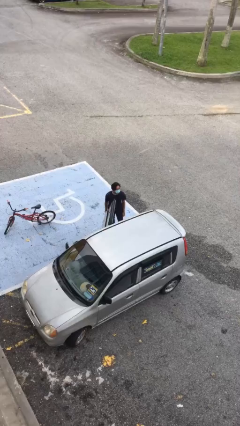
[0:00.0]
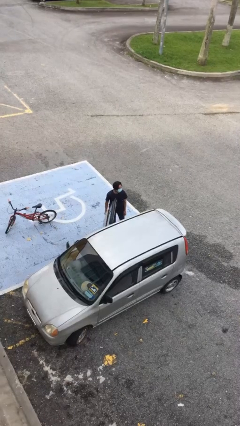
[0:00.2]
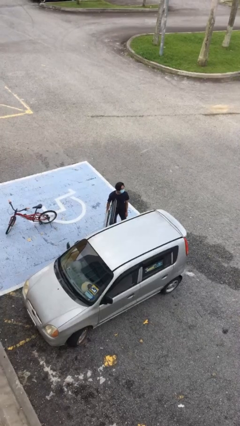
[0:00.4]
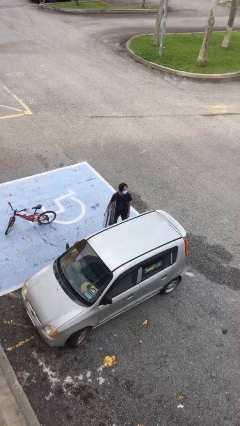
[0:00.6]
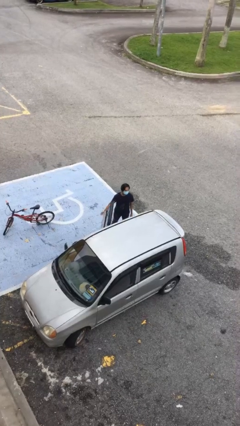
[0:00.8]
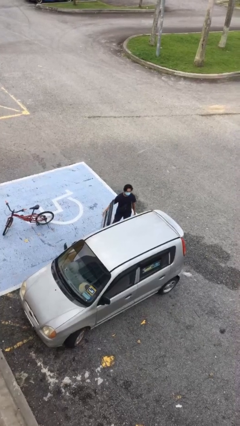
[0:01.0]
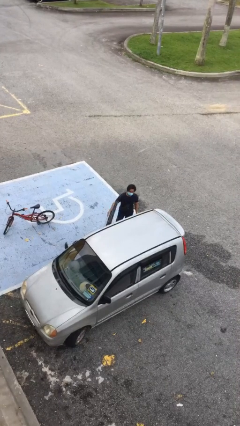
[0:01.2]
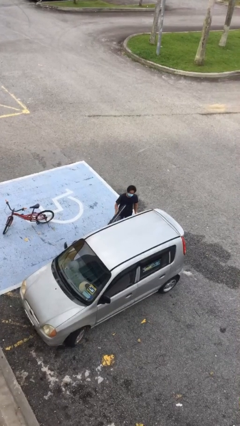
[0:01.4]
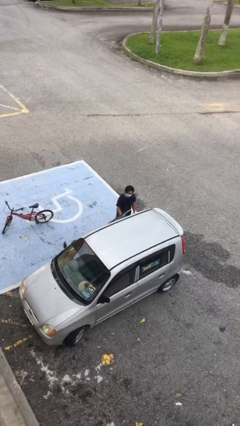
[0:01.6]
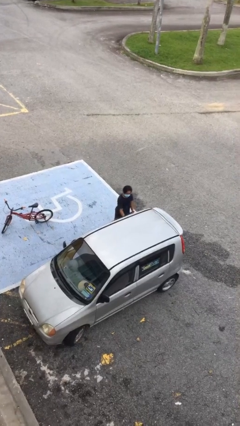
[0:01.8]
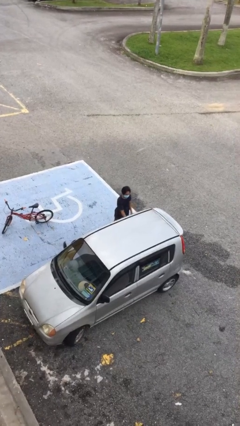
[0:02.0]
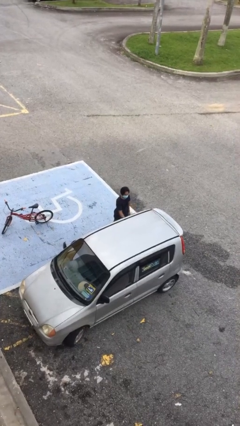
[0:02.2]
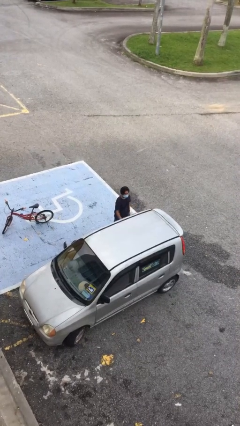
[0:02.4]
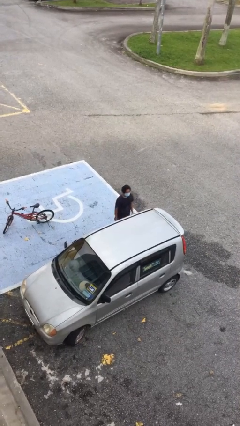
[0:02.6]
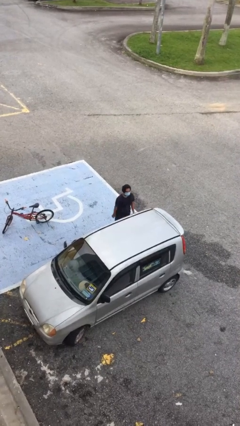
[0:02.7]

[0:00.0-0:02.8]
person closes car door

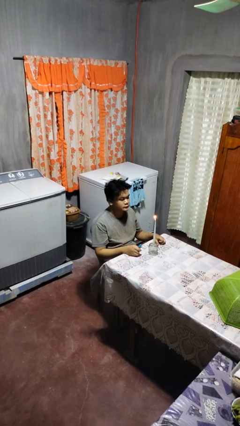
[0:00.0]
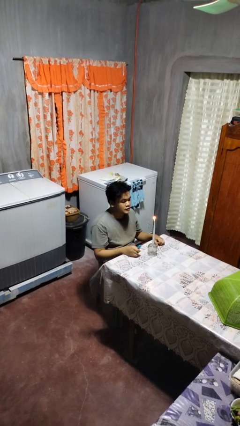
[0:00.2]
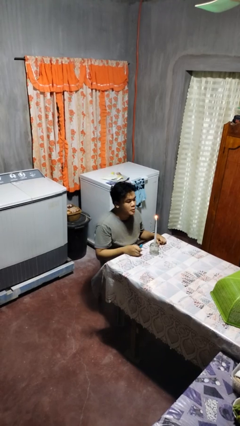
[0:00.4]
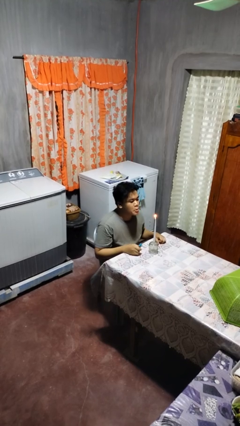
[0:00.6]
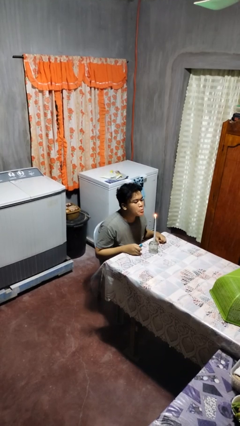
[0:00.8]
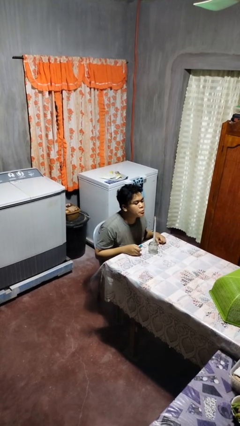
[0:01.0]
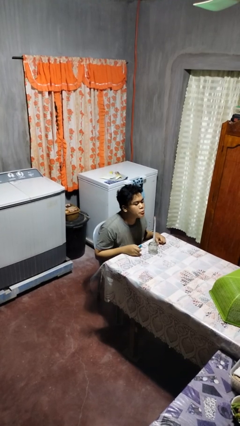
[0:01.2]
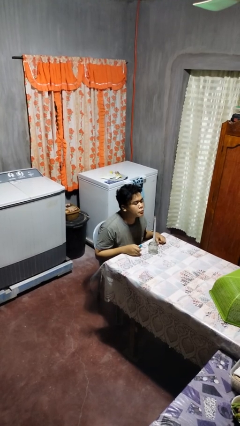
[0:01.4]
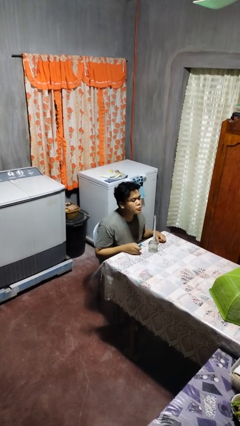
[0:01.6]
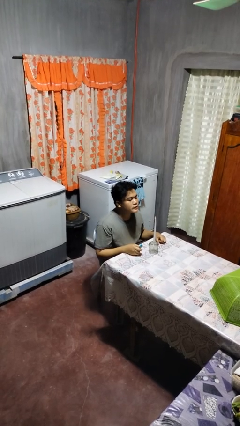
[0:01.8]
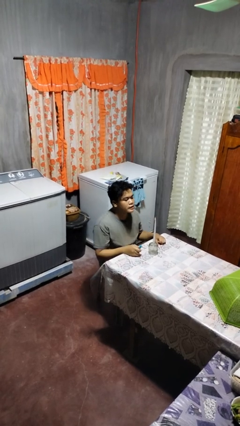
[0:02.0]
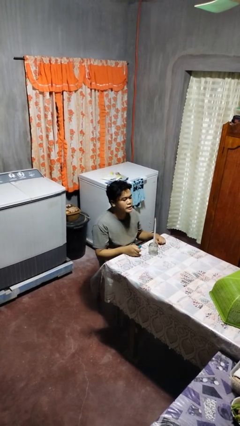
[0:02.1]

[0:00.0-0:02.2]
person extinguishes candle

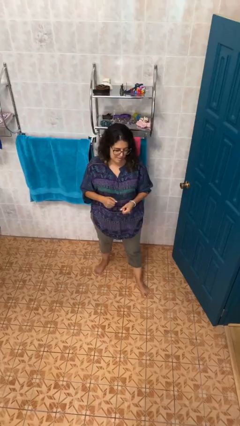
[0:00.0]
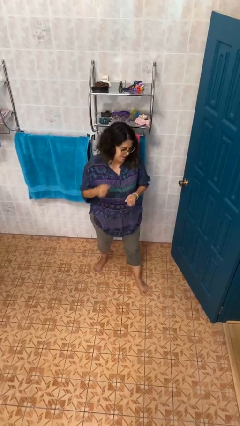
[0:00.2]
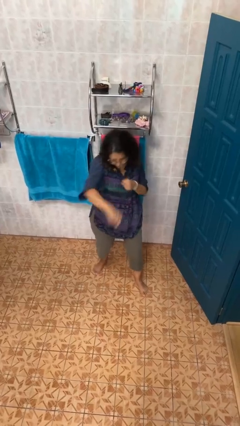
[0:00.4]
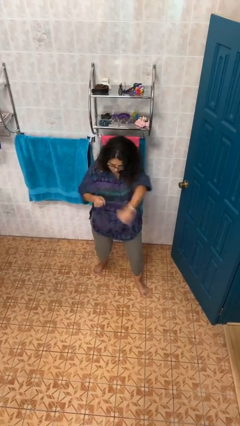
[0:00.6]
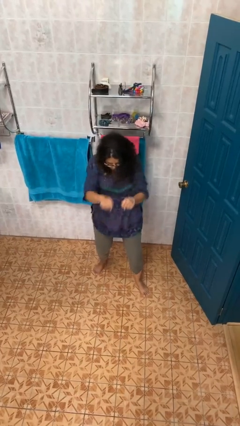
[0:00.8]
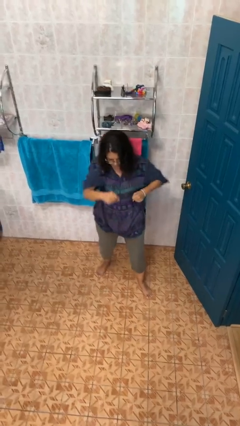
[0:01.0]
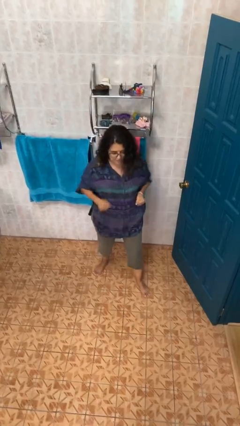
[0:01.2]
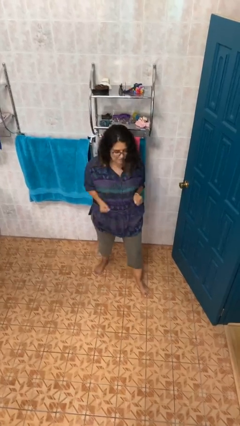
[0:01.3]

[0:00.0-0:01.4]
person punches

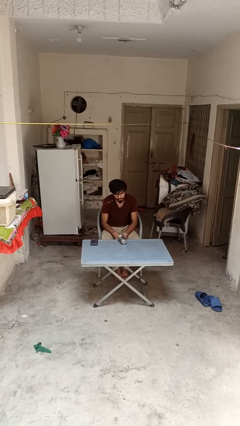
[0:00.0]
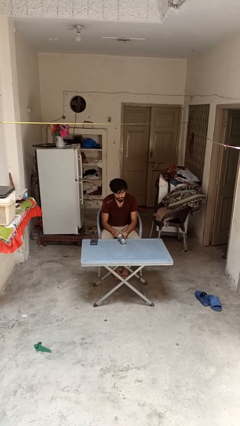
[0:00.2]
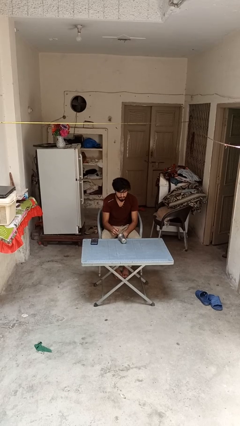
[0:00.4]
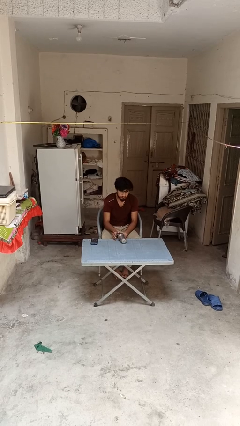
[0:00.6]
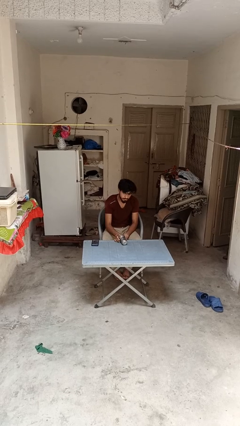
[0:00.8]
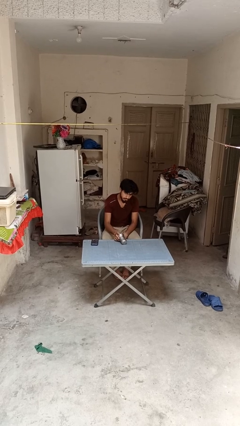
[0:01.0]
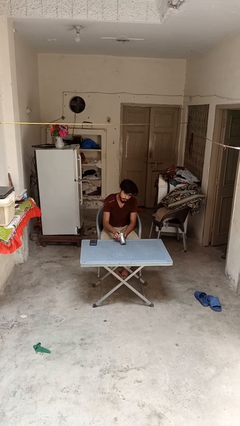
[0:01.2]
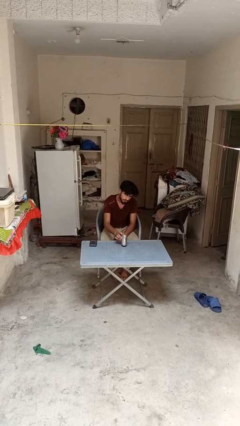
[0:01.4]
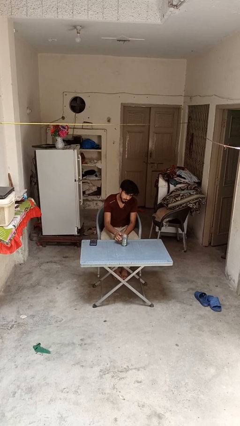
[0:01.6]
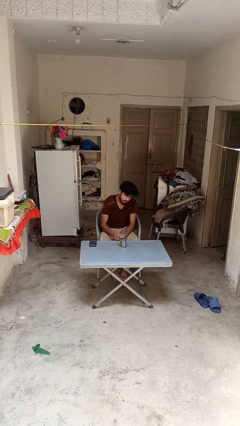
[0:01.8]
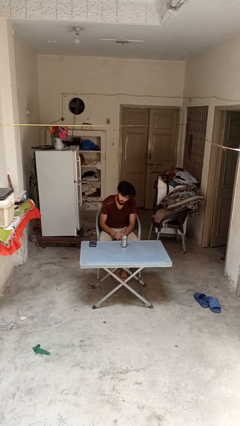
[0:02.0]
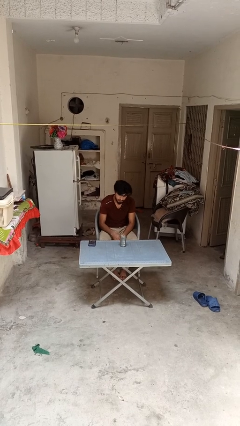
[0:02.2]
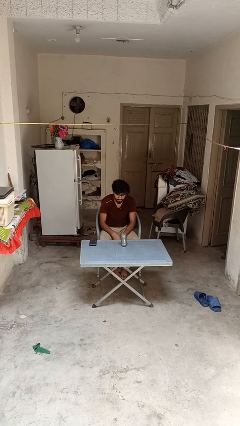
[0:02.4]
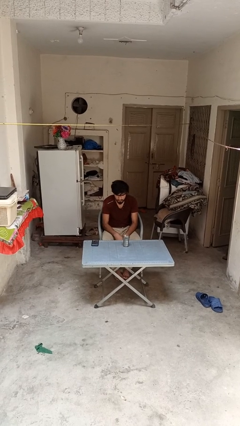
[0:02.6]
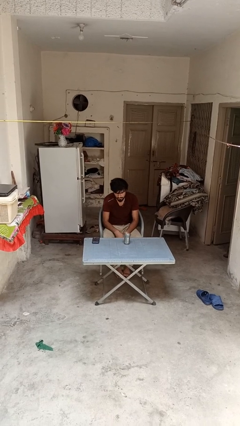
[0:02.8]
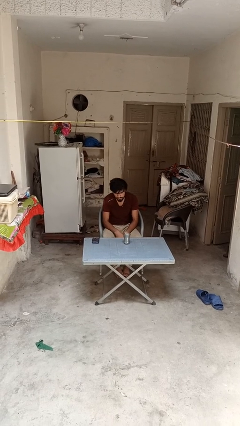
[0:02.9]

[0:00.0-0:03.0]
person sets upright glass

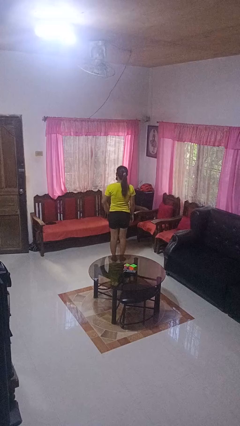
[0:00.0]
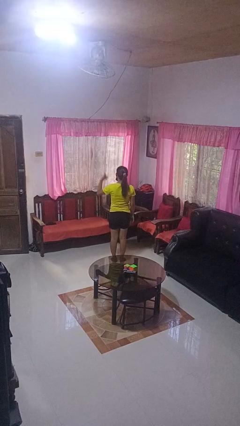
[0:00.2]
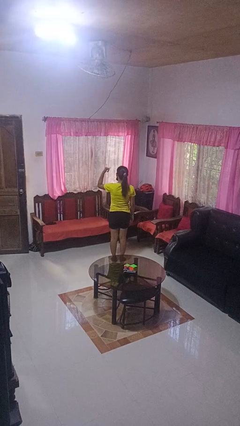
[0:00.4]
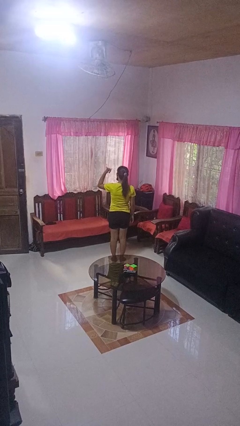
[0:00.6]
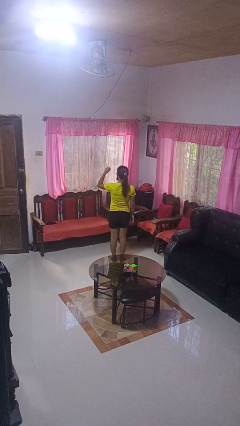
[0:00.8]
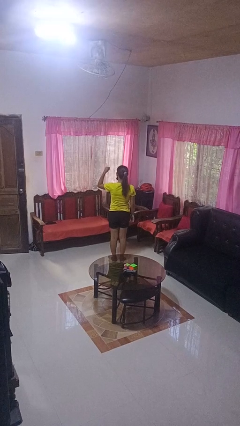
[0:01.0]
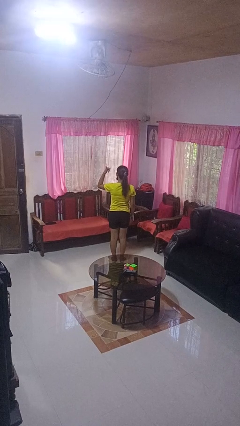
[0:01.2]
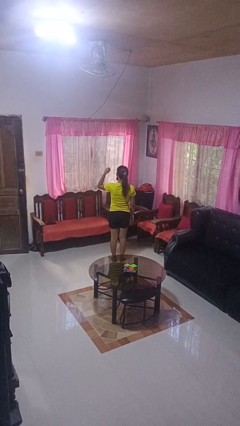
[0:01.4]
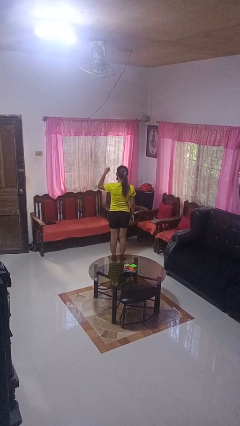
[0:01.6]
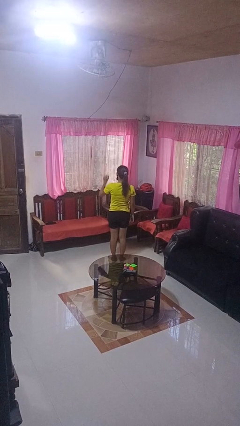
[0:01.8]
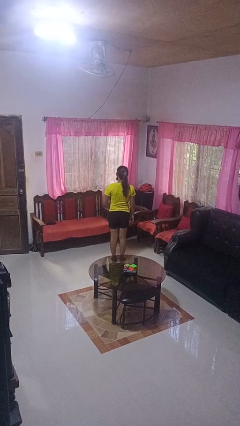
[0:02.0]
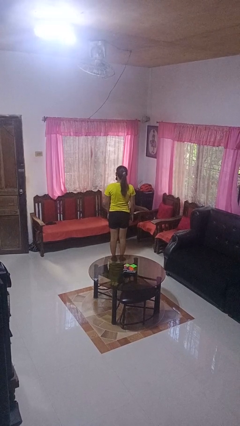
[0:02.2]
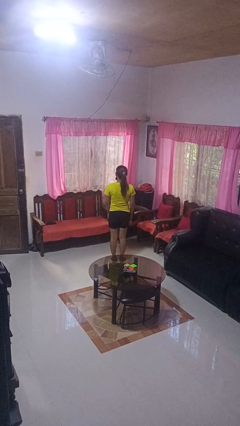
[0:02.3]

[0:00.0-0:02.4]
person gestures hang loose

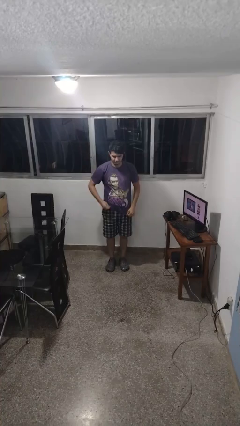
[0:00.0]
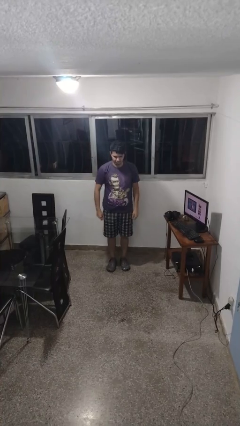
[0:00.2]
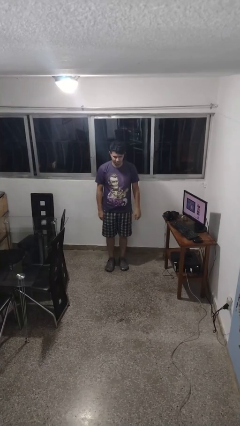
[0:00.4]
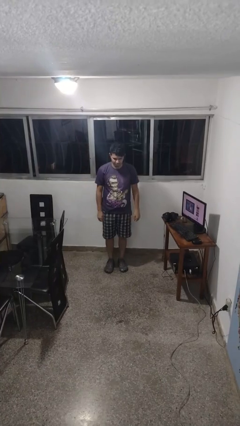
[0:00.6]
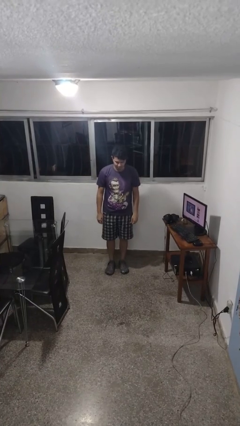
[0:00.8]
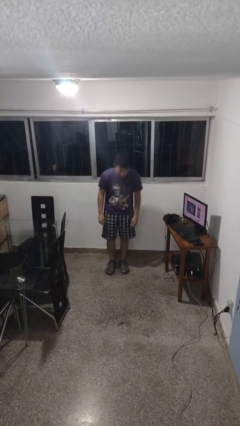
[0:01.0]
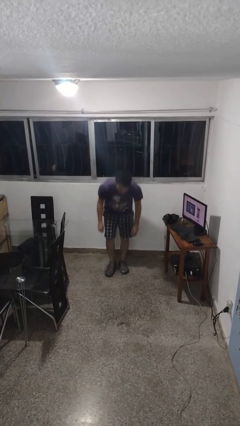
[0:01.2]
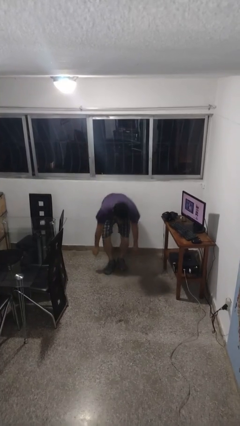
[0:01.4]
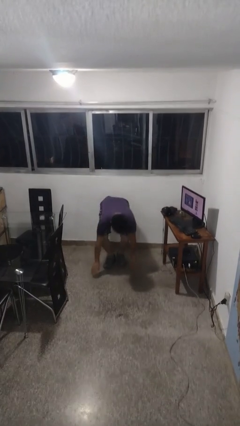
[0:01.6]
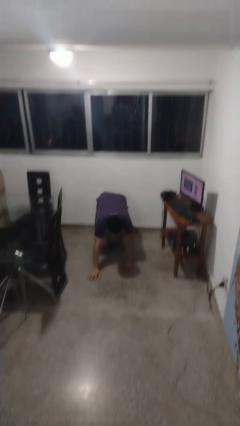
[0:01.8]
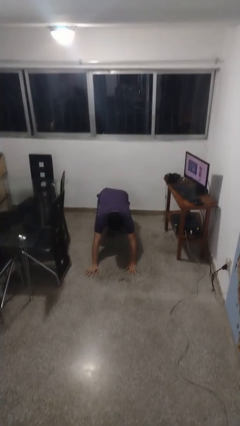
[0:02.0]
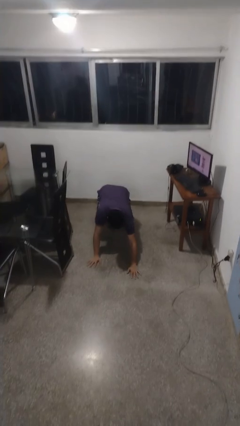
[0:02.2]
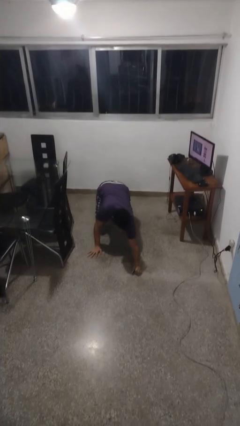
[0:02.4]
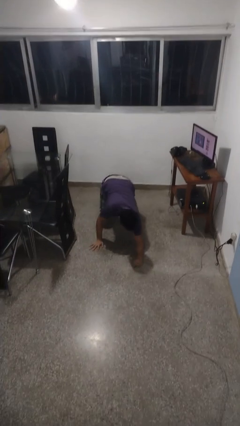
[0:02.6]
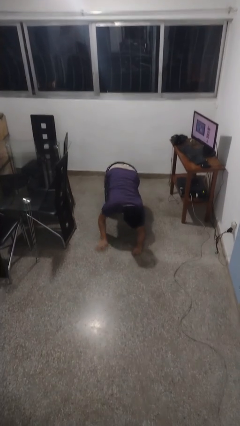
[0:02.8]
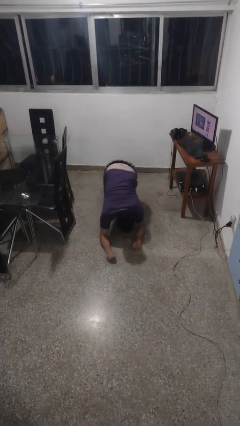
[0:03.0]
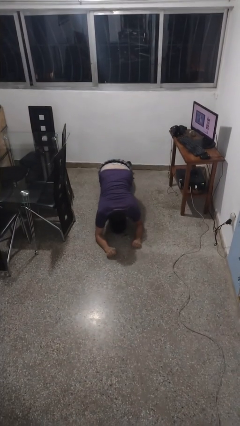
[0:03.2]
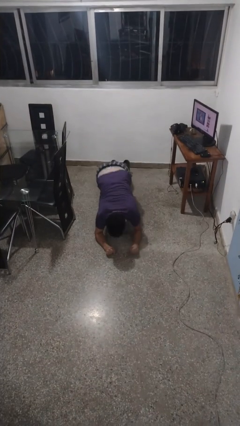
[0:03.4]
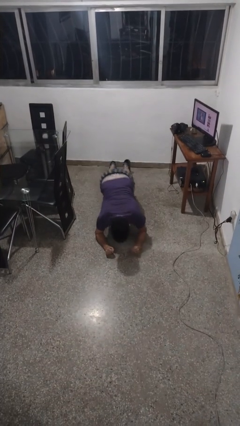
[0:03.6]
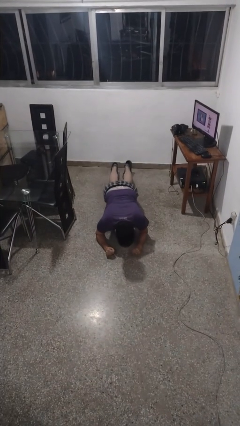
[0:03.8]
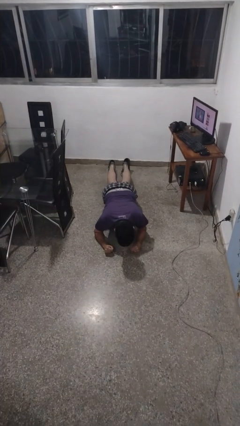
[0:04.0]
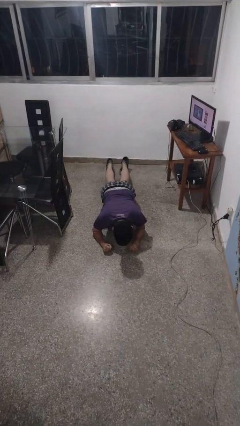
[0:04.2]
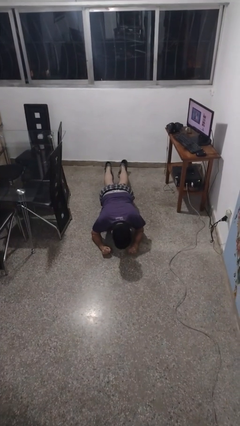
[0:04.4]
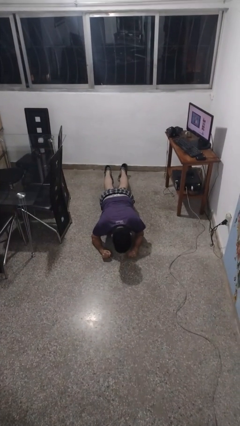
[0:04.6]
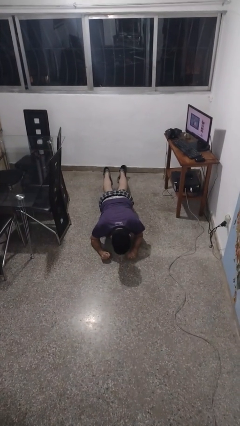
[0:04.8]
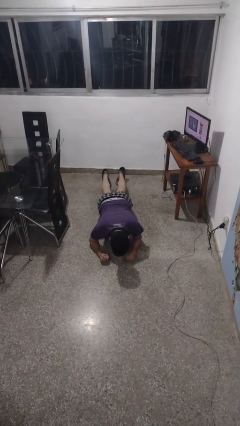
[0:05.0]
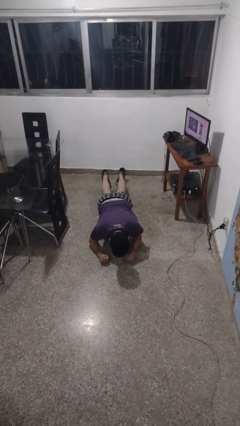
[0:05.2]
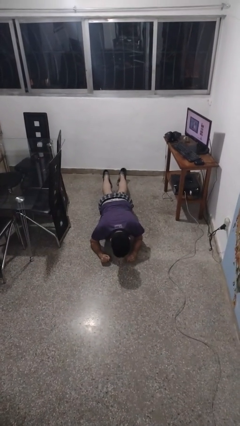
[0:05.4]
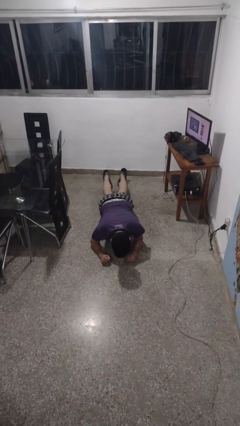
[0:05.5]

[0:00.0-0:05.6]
person exercises with plank
